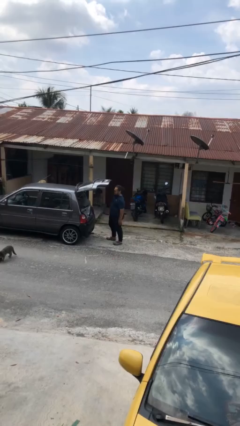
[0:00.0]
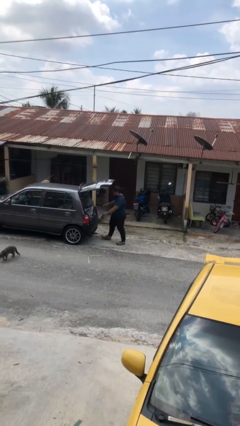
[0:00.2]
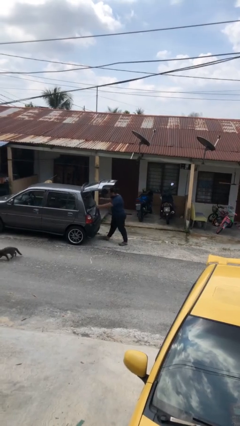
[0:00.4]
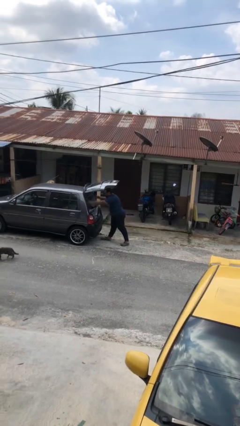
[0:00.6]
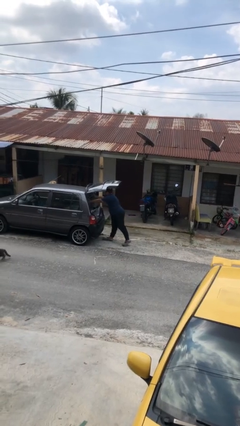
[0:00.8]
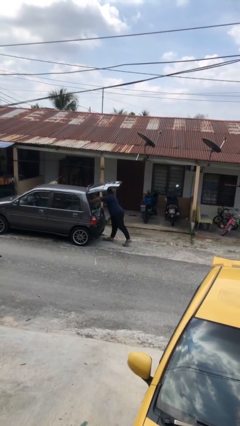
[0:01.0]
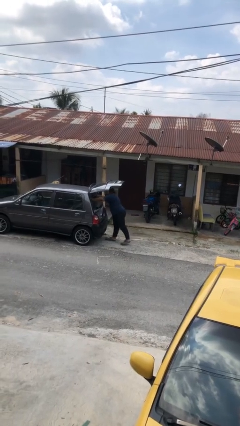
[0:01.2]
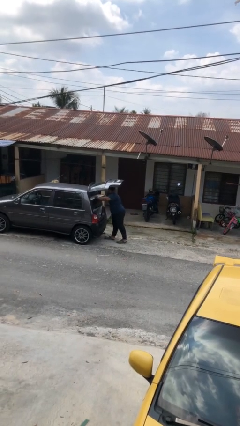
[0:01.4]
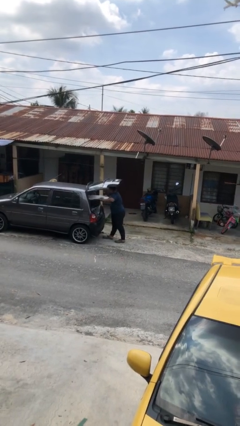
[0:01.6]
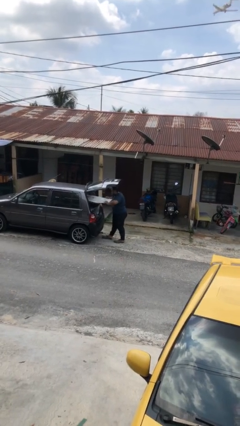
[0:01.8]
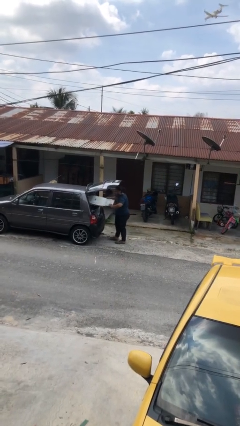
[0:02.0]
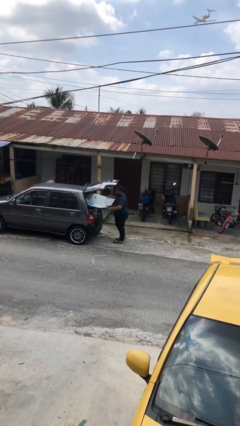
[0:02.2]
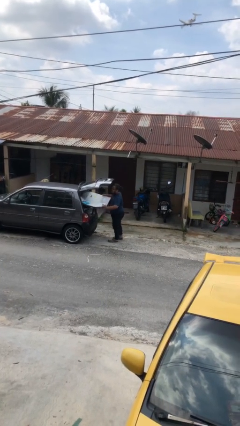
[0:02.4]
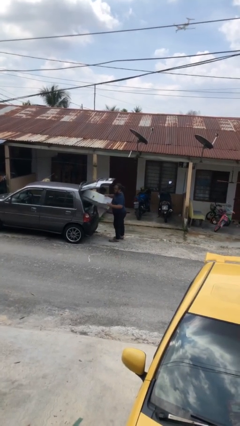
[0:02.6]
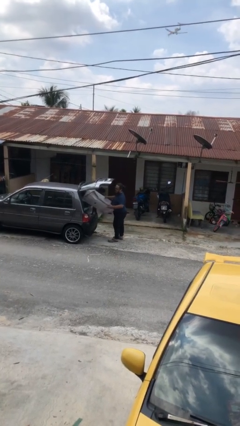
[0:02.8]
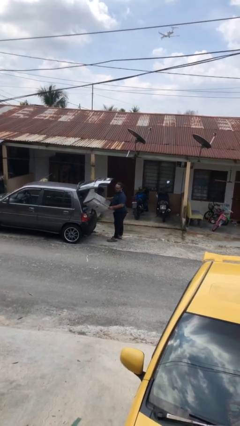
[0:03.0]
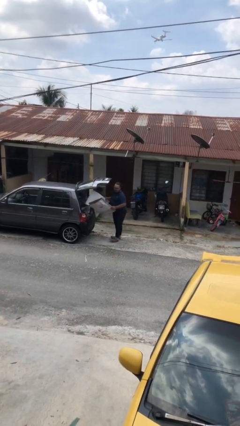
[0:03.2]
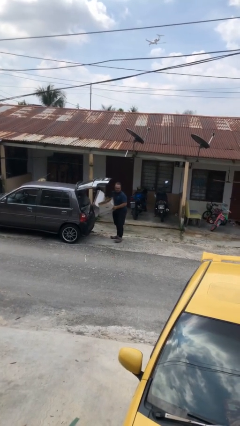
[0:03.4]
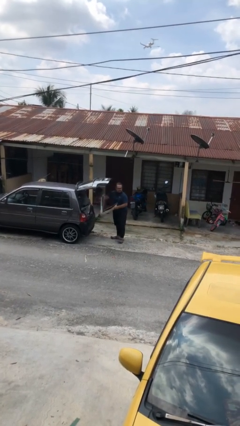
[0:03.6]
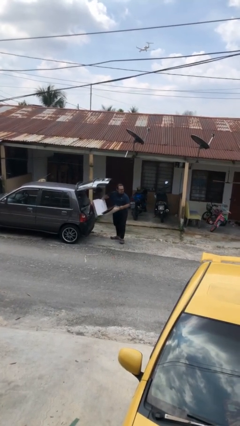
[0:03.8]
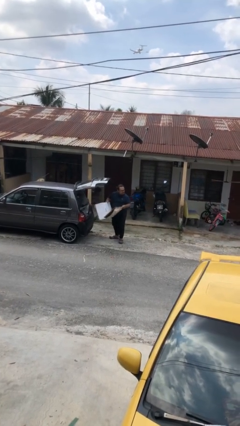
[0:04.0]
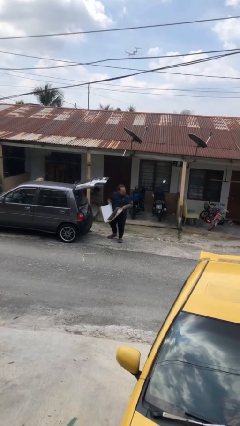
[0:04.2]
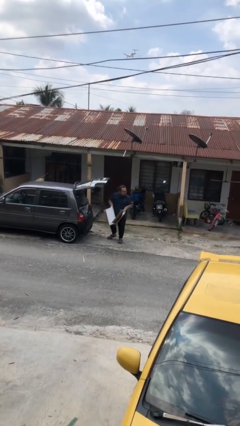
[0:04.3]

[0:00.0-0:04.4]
person unloads car

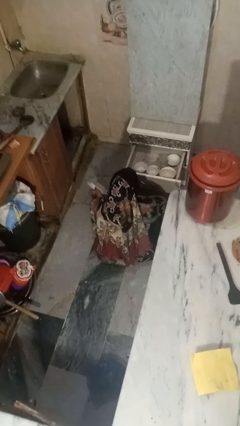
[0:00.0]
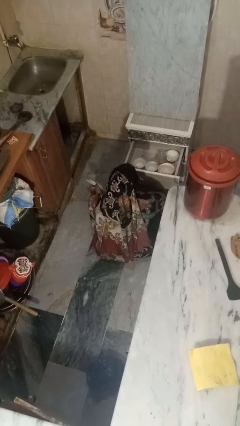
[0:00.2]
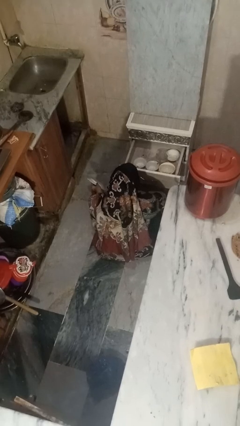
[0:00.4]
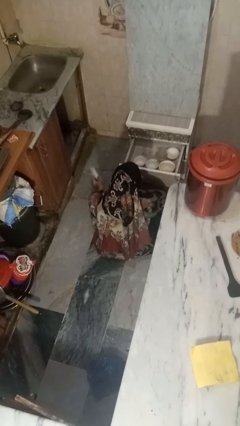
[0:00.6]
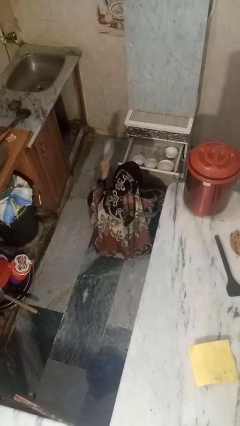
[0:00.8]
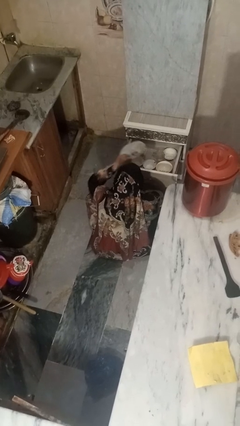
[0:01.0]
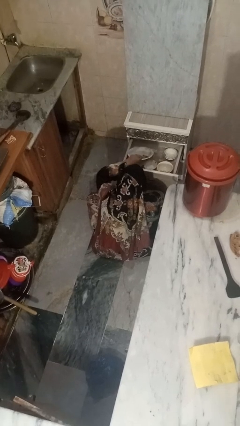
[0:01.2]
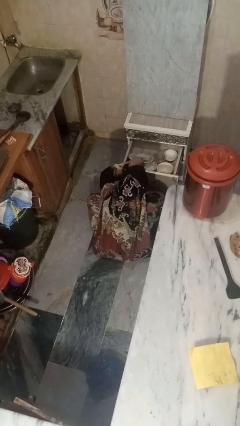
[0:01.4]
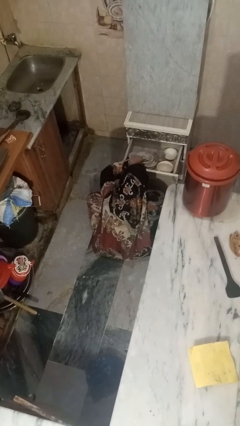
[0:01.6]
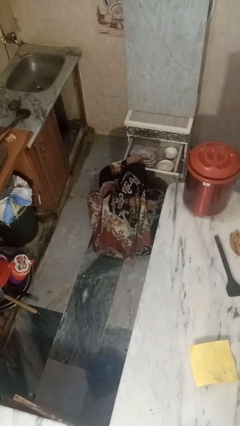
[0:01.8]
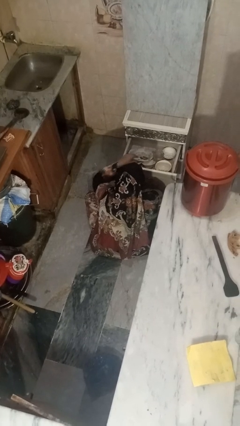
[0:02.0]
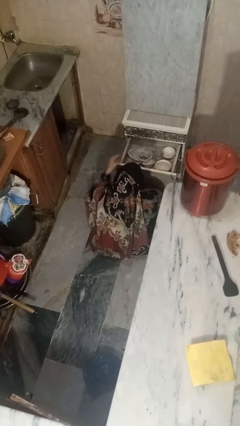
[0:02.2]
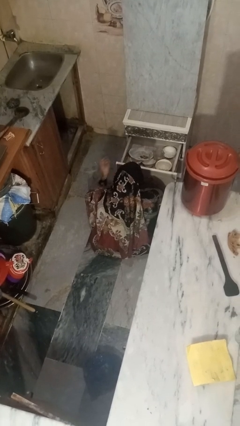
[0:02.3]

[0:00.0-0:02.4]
person puts object into kitchen drawer

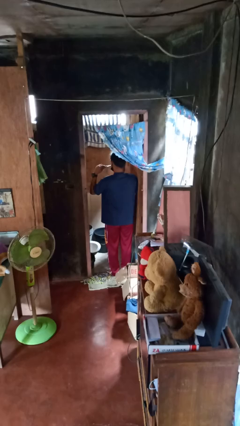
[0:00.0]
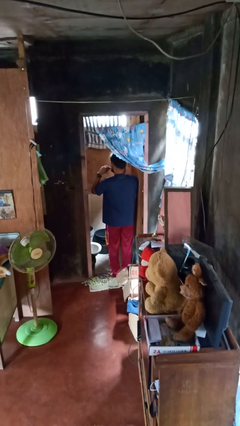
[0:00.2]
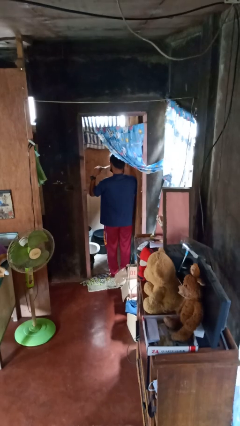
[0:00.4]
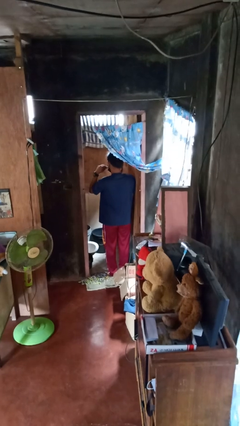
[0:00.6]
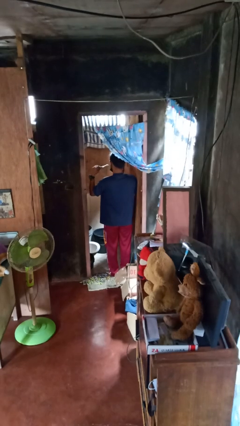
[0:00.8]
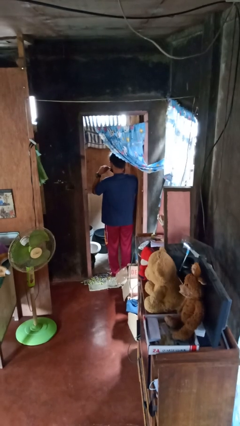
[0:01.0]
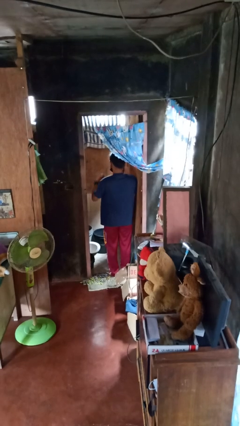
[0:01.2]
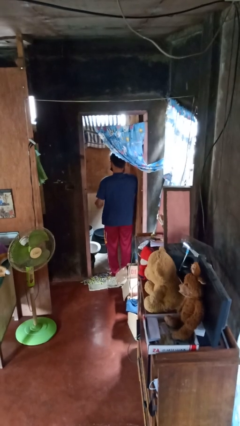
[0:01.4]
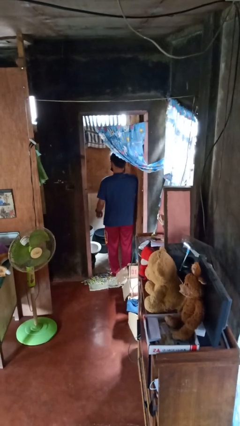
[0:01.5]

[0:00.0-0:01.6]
person brushes teeth

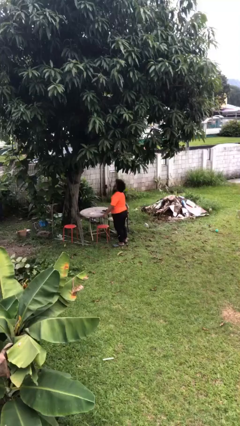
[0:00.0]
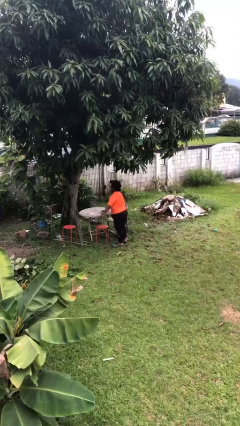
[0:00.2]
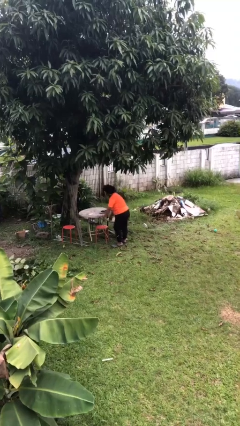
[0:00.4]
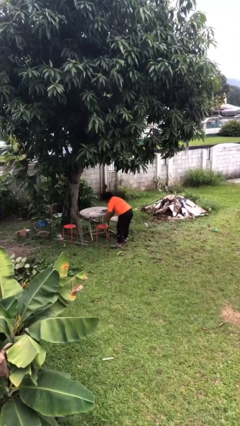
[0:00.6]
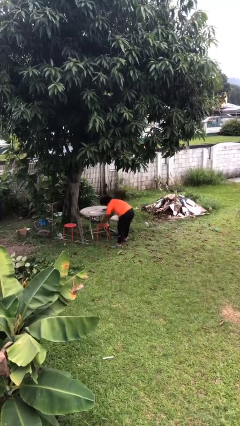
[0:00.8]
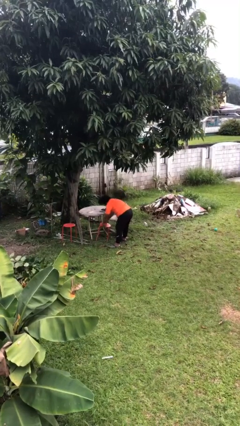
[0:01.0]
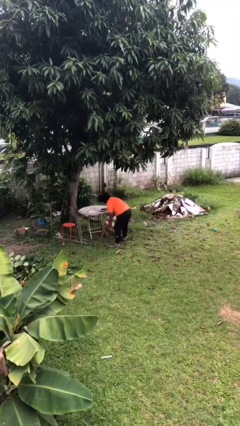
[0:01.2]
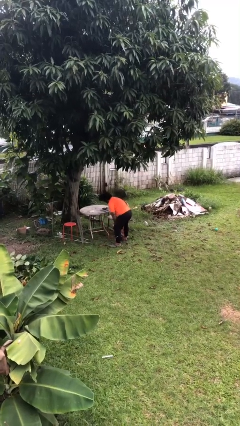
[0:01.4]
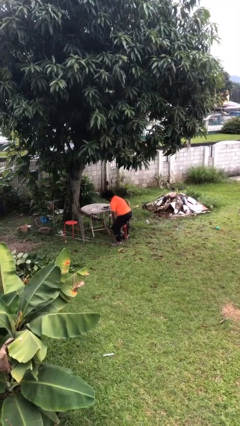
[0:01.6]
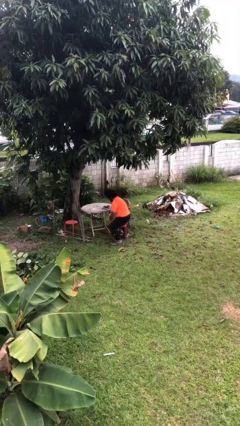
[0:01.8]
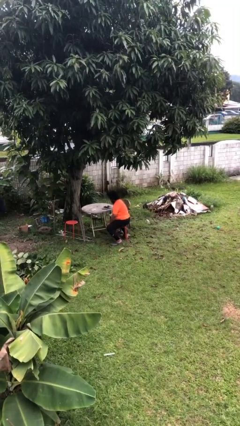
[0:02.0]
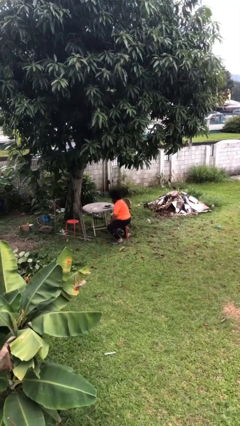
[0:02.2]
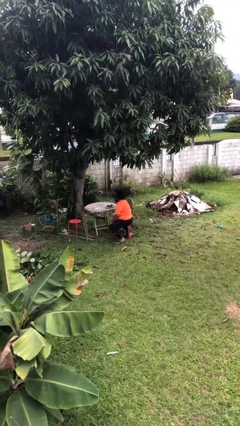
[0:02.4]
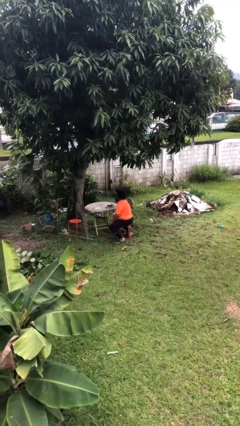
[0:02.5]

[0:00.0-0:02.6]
person sits down

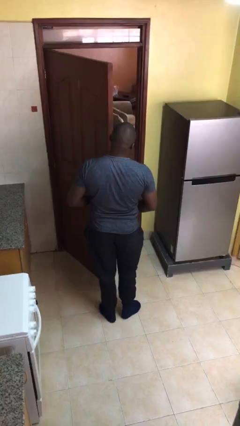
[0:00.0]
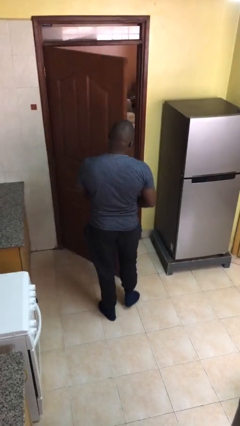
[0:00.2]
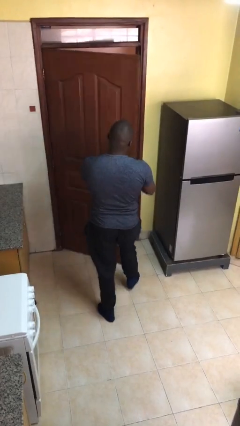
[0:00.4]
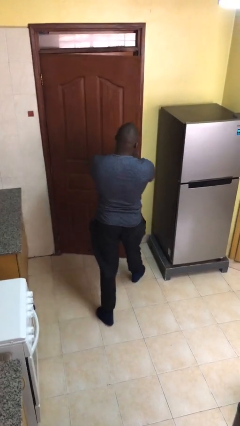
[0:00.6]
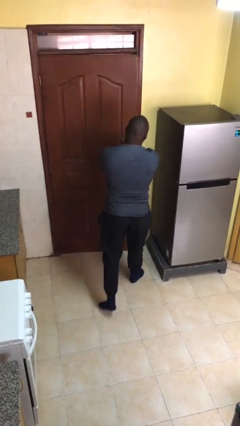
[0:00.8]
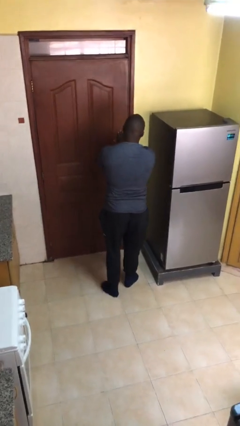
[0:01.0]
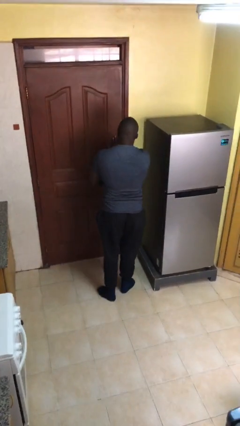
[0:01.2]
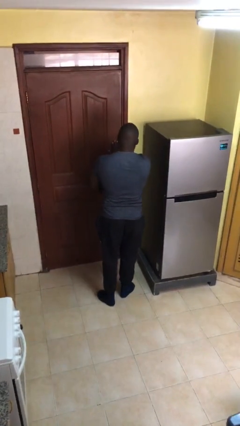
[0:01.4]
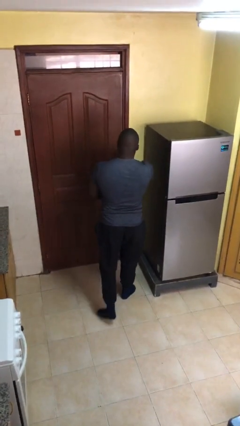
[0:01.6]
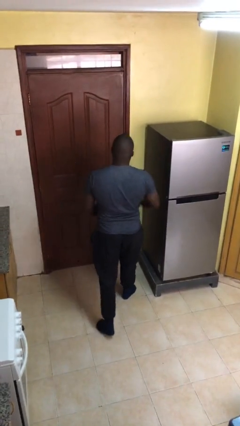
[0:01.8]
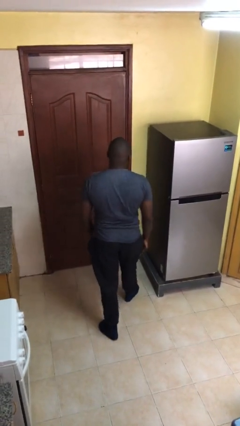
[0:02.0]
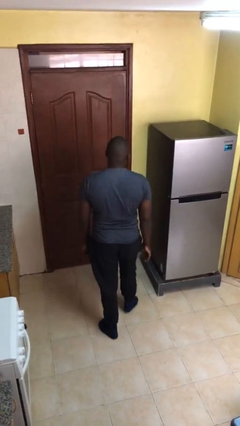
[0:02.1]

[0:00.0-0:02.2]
person closes facility door

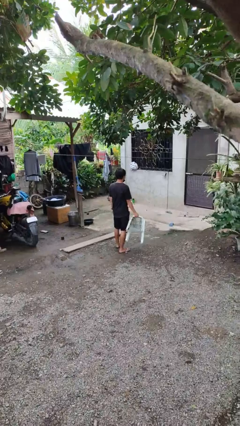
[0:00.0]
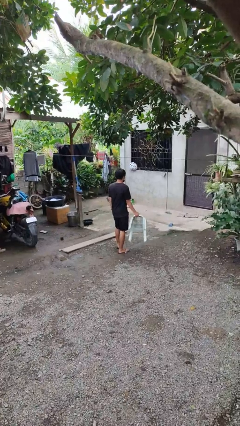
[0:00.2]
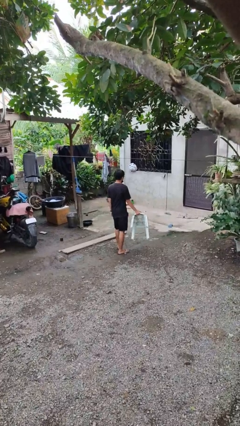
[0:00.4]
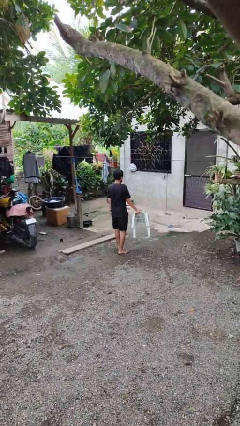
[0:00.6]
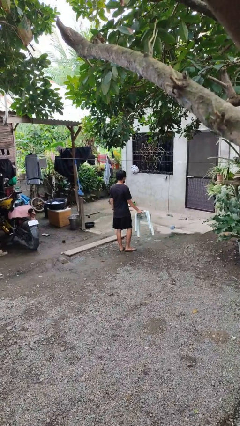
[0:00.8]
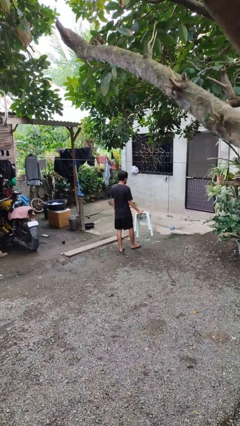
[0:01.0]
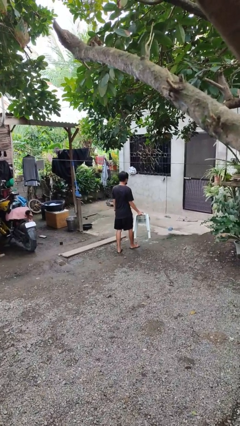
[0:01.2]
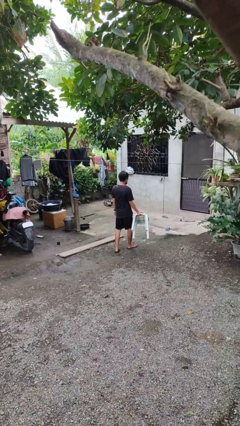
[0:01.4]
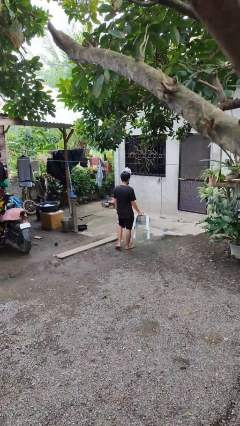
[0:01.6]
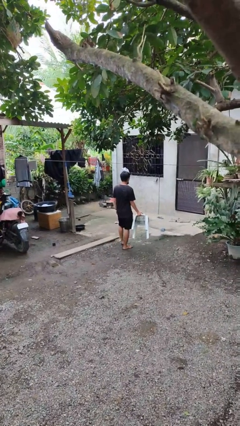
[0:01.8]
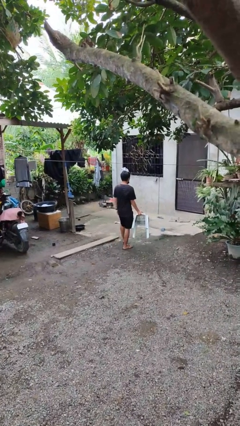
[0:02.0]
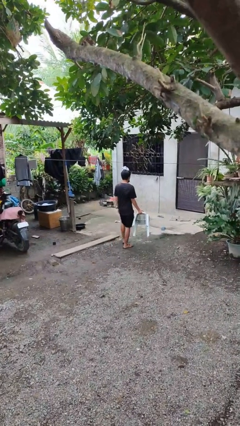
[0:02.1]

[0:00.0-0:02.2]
person carries furniture

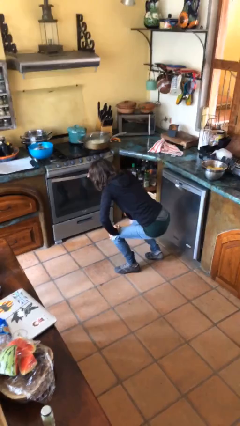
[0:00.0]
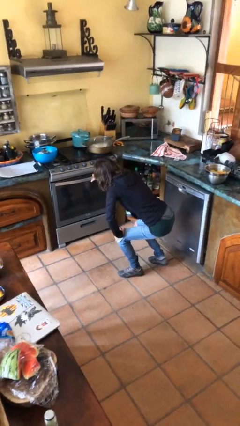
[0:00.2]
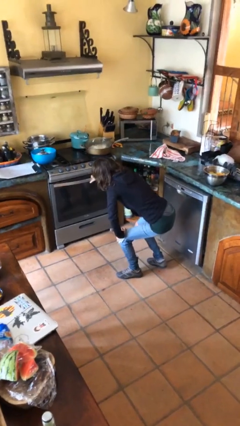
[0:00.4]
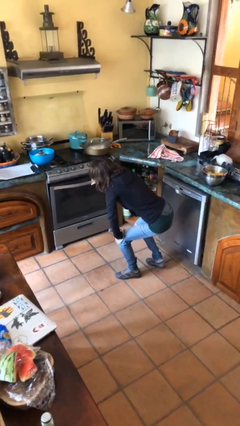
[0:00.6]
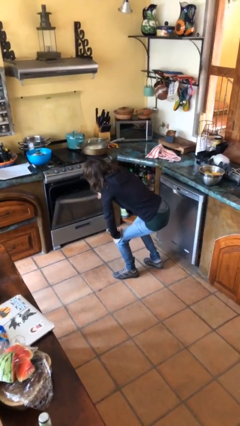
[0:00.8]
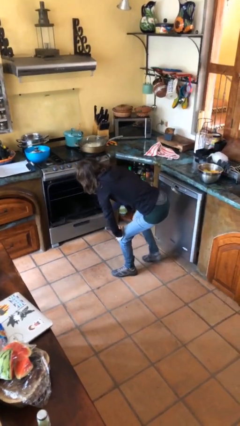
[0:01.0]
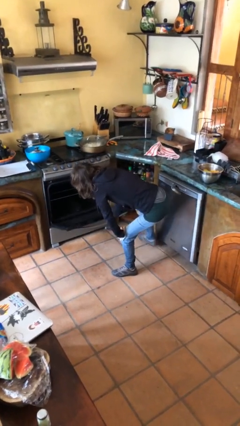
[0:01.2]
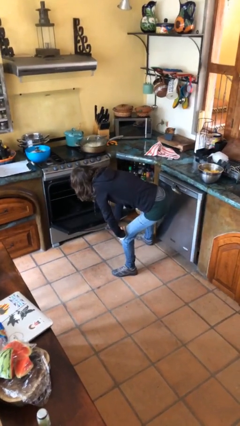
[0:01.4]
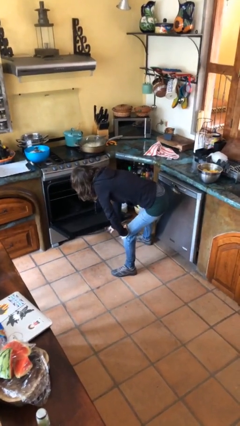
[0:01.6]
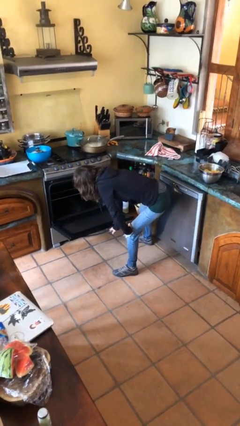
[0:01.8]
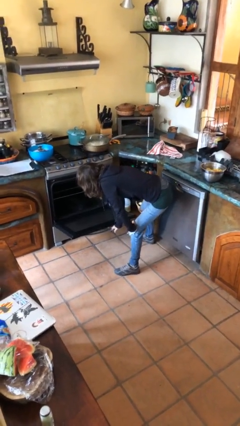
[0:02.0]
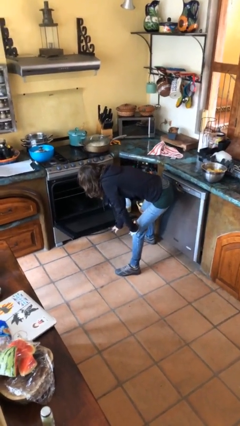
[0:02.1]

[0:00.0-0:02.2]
person opens oven door
